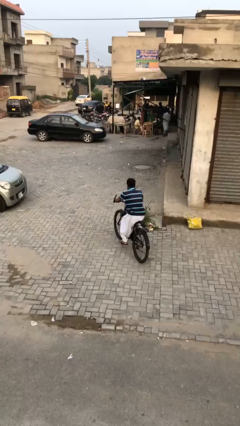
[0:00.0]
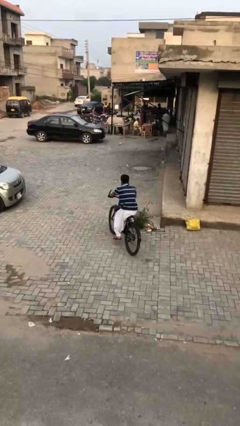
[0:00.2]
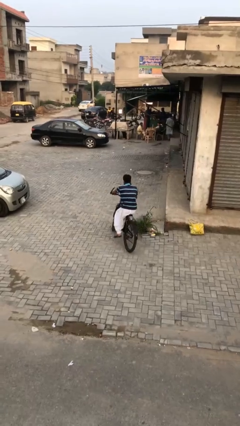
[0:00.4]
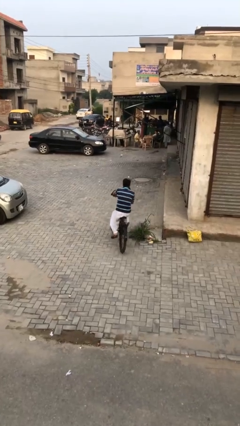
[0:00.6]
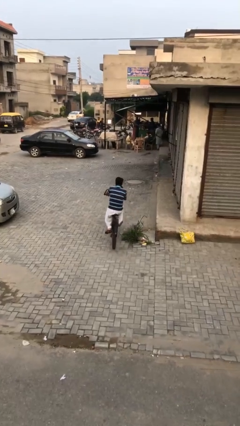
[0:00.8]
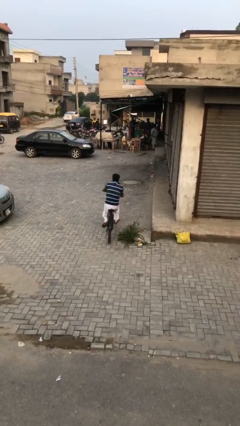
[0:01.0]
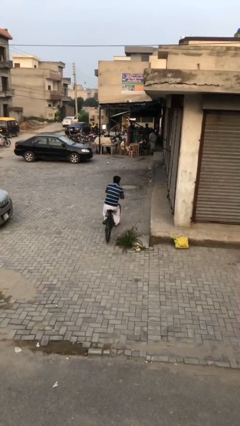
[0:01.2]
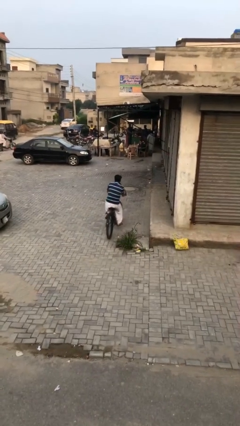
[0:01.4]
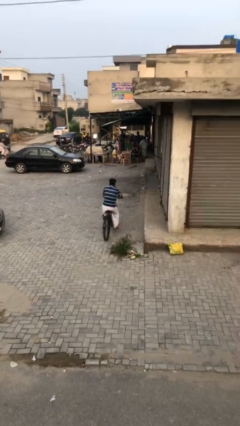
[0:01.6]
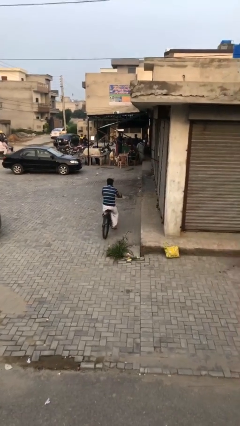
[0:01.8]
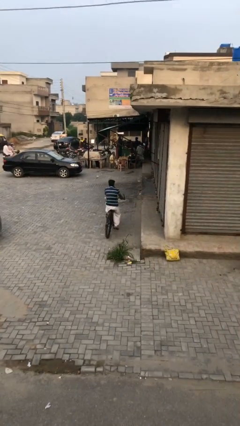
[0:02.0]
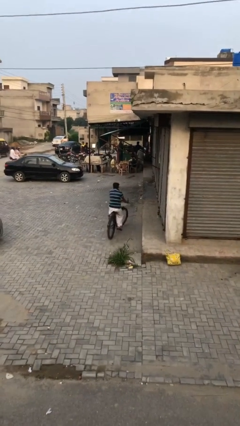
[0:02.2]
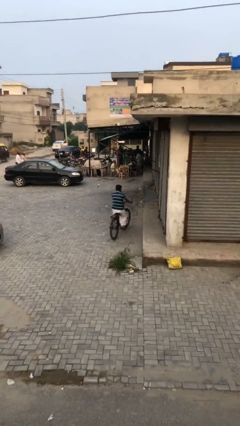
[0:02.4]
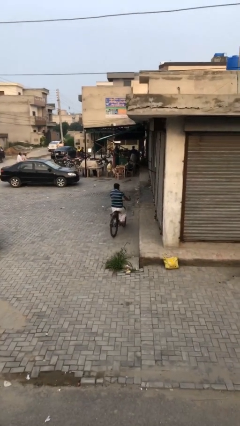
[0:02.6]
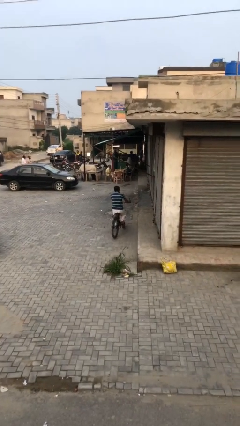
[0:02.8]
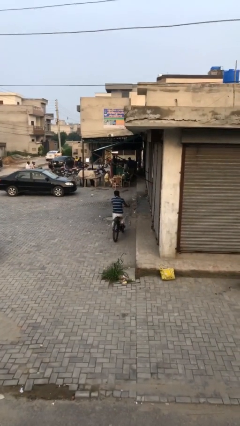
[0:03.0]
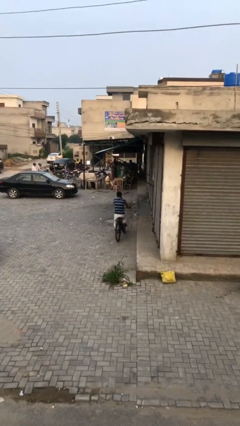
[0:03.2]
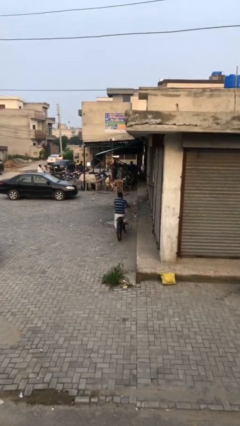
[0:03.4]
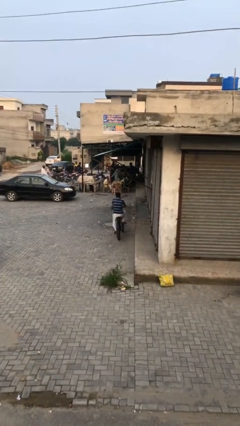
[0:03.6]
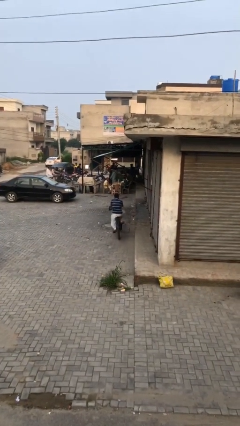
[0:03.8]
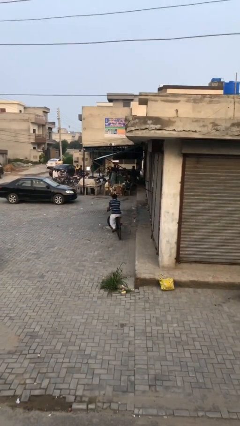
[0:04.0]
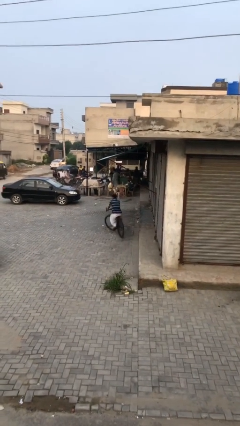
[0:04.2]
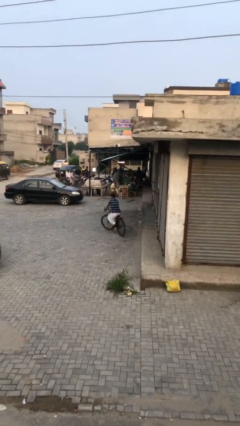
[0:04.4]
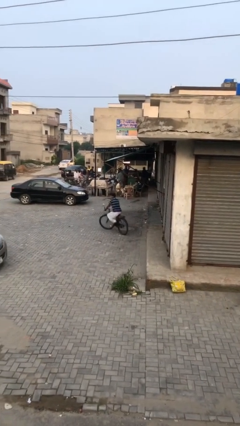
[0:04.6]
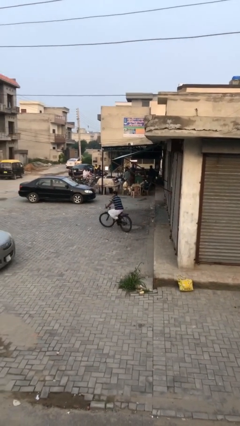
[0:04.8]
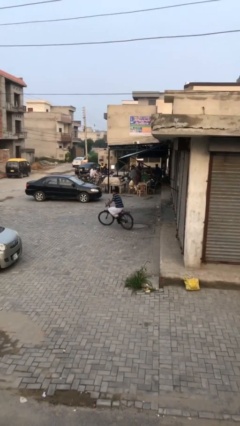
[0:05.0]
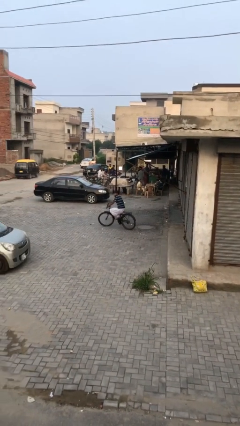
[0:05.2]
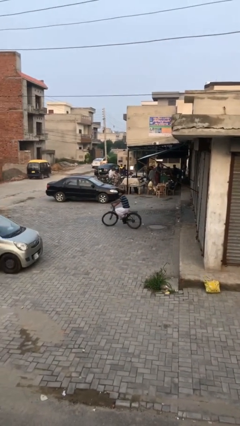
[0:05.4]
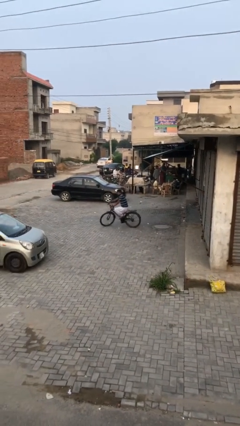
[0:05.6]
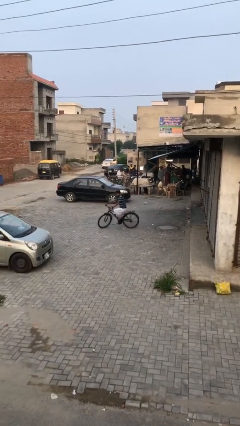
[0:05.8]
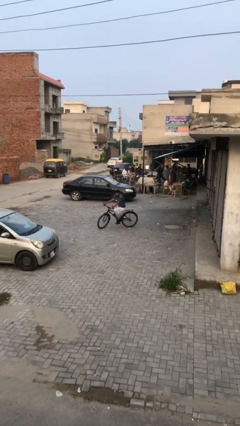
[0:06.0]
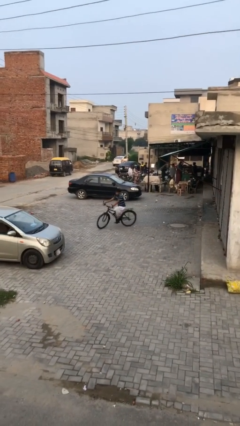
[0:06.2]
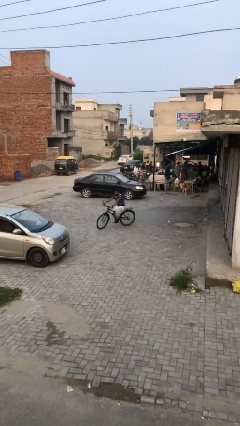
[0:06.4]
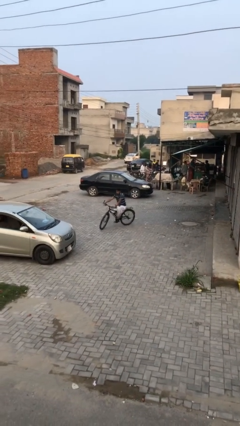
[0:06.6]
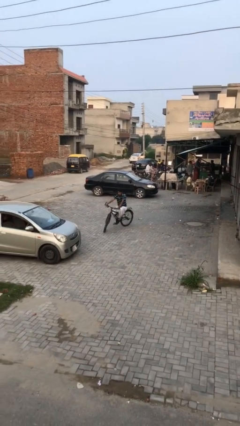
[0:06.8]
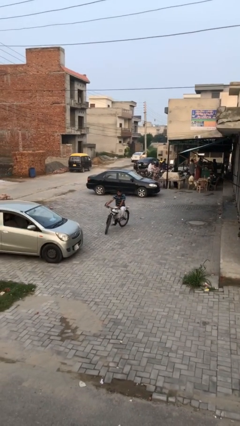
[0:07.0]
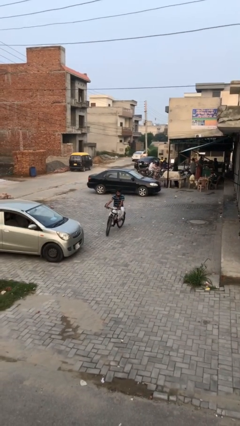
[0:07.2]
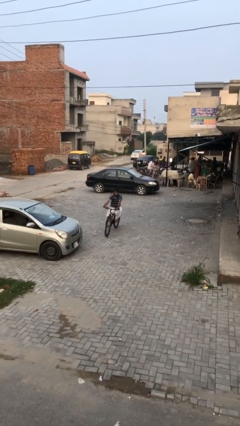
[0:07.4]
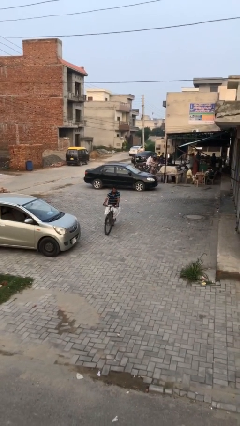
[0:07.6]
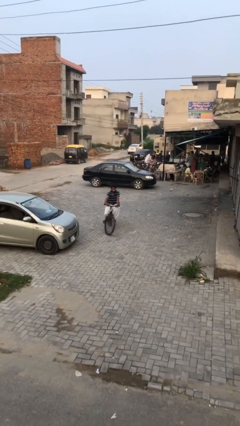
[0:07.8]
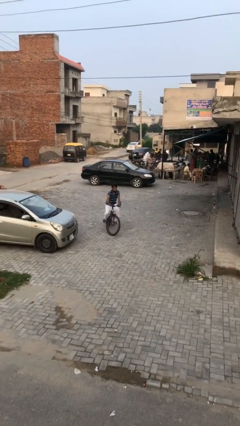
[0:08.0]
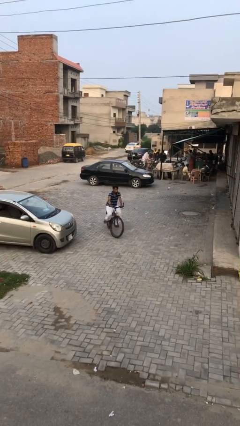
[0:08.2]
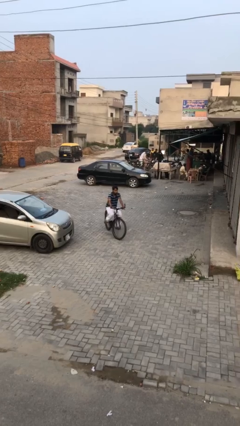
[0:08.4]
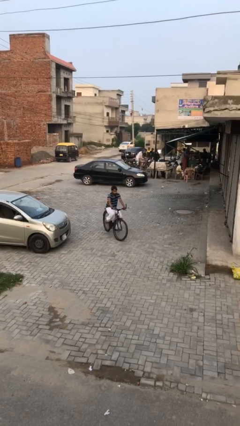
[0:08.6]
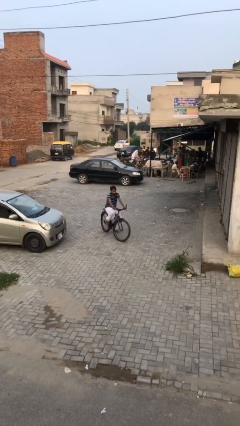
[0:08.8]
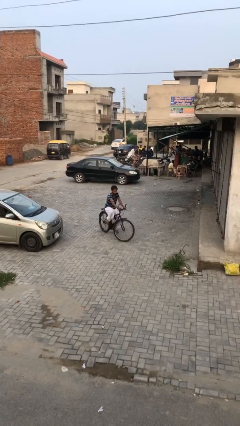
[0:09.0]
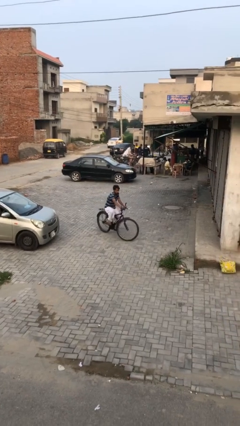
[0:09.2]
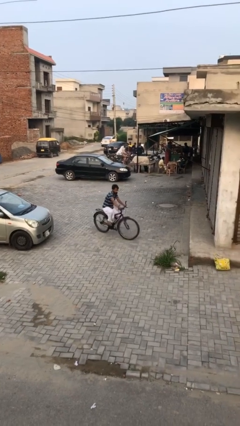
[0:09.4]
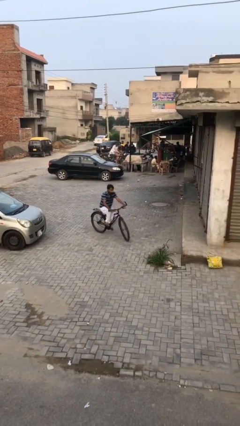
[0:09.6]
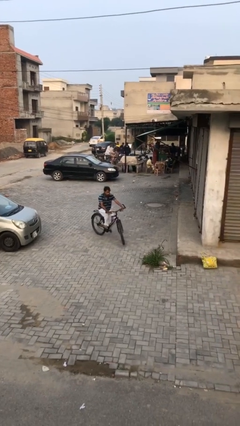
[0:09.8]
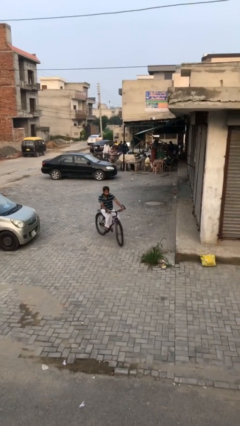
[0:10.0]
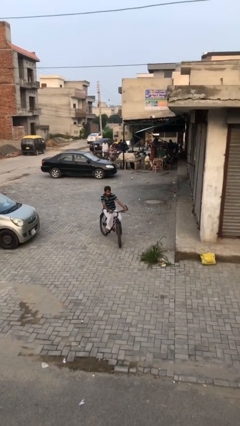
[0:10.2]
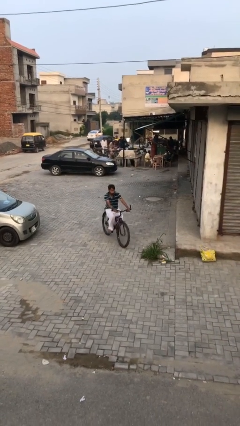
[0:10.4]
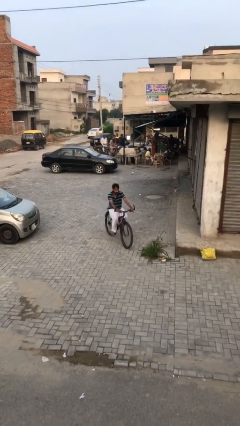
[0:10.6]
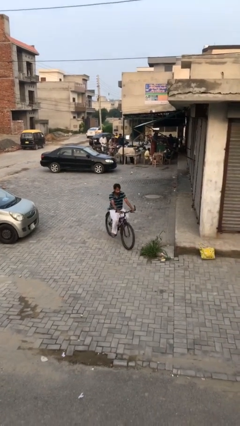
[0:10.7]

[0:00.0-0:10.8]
person rides bicycle

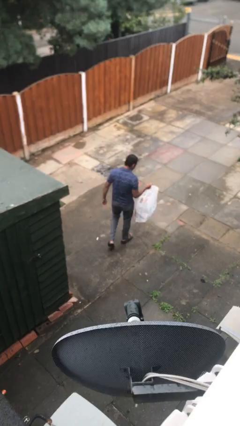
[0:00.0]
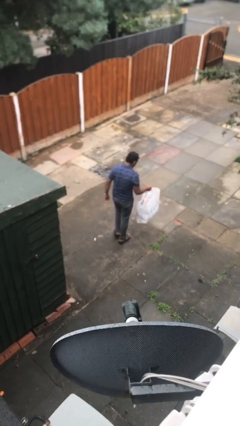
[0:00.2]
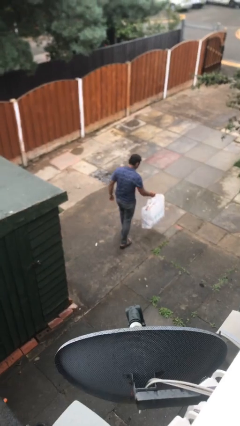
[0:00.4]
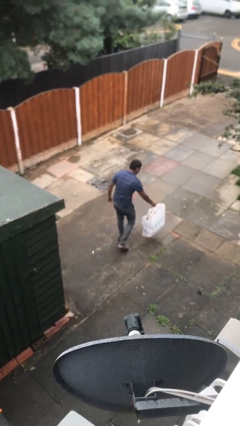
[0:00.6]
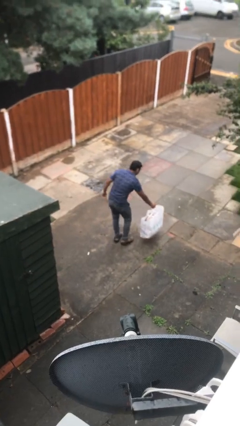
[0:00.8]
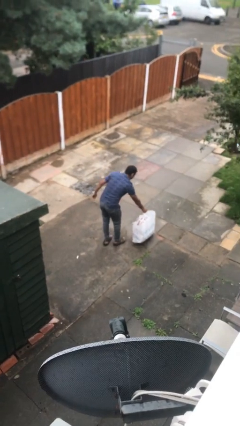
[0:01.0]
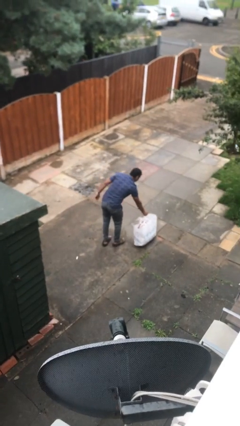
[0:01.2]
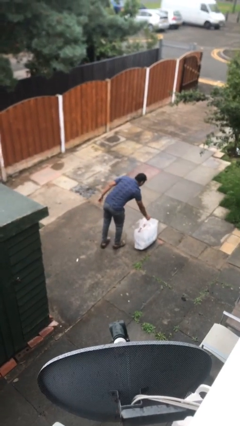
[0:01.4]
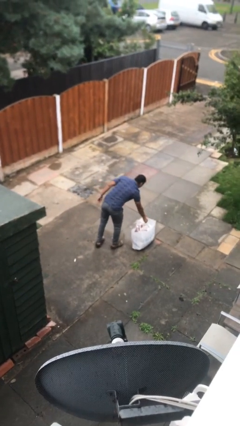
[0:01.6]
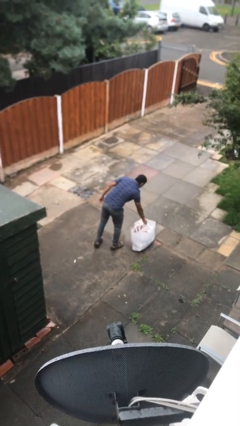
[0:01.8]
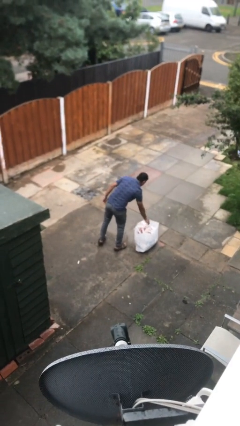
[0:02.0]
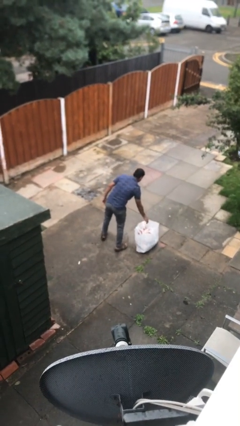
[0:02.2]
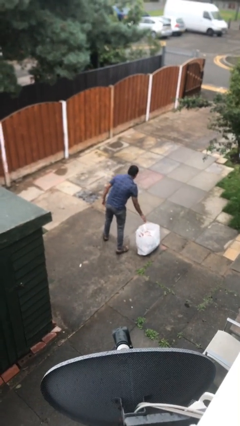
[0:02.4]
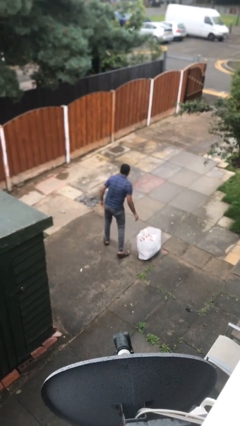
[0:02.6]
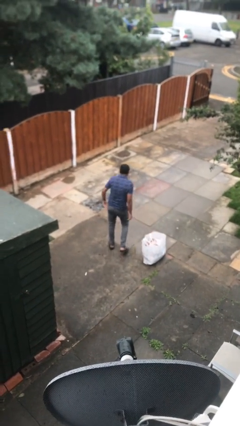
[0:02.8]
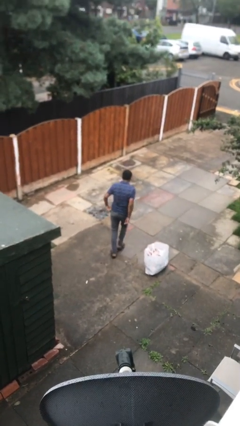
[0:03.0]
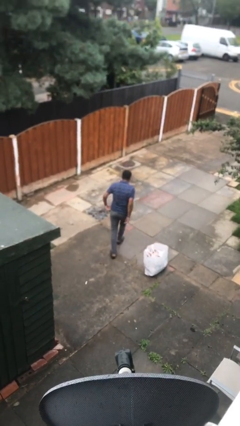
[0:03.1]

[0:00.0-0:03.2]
person puts down object on floor

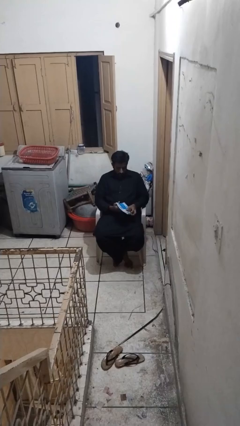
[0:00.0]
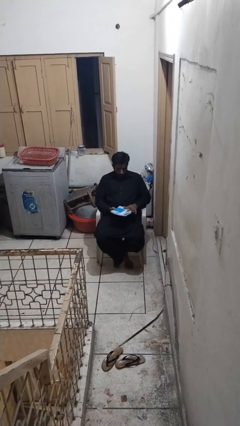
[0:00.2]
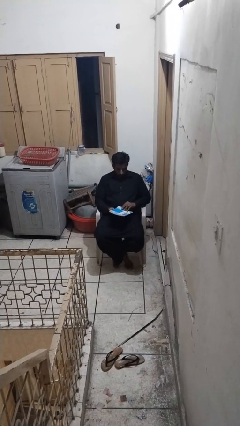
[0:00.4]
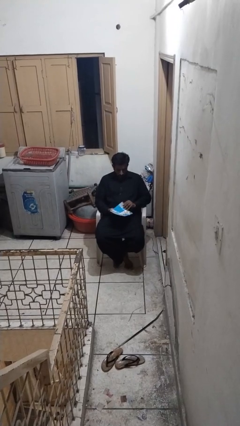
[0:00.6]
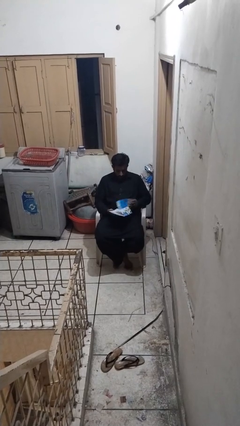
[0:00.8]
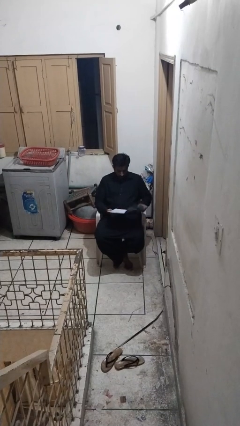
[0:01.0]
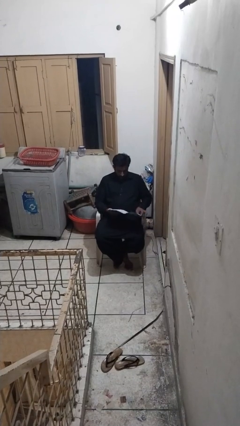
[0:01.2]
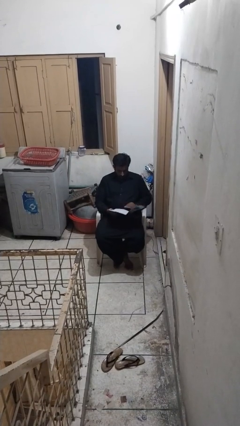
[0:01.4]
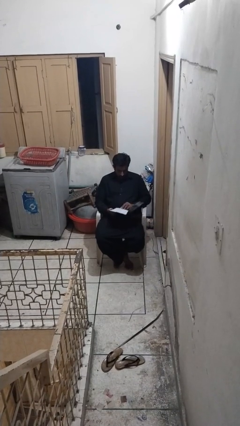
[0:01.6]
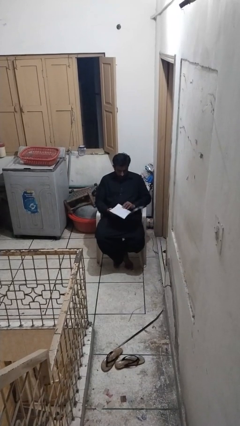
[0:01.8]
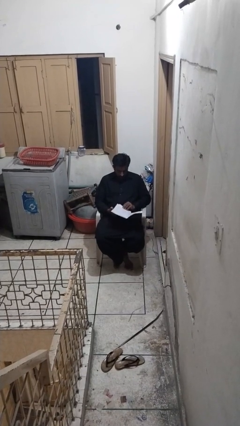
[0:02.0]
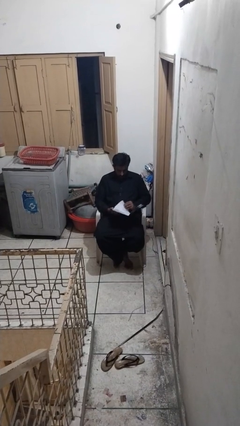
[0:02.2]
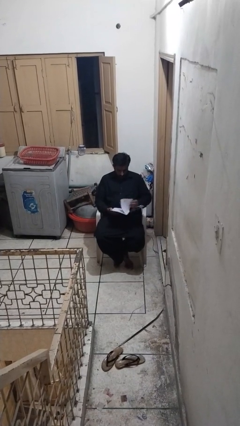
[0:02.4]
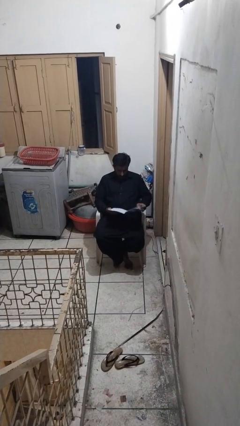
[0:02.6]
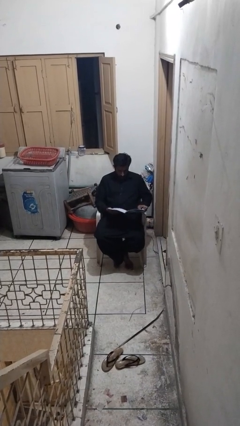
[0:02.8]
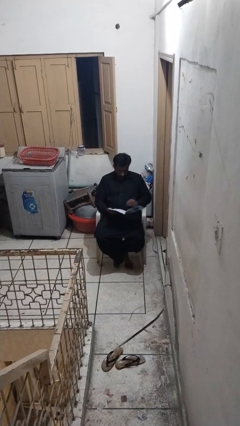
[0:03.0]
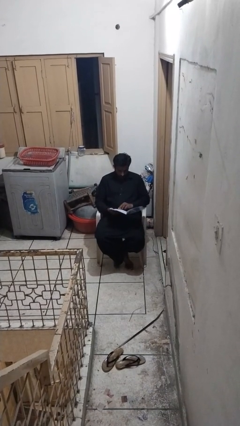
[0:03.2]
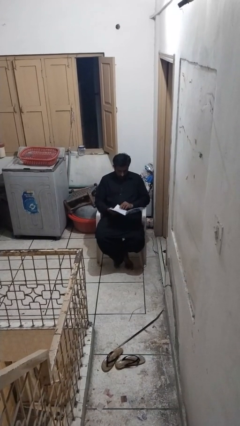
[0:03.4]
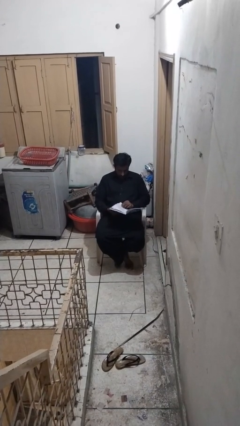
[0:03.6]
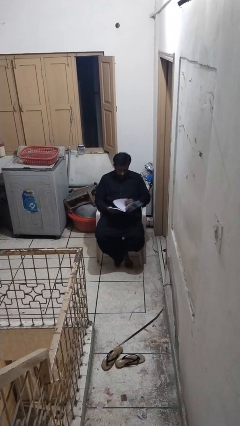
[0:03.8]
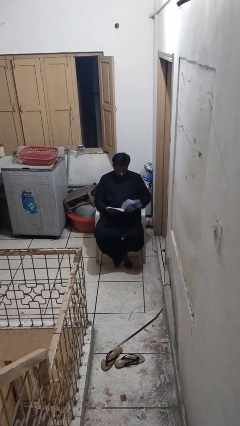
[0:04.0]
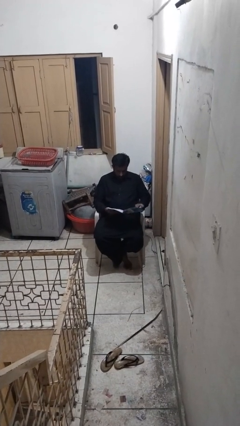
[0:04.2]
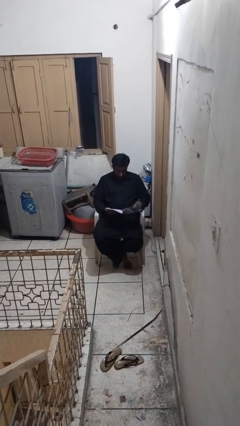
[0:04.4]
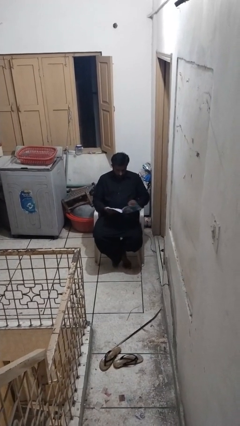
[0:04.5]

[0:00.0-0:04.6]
person reads book
